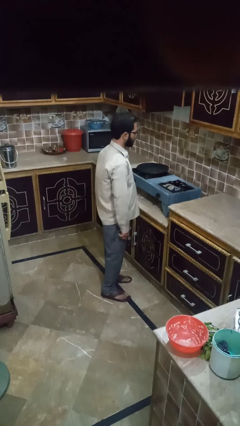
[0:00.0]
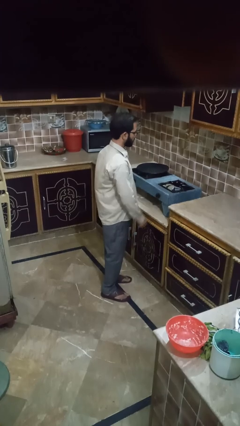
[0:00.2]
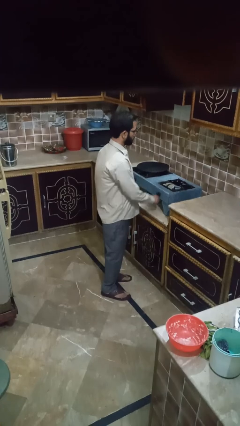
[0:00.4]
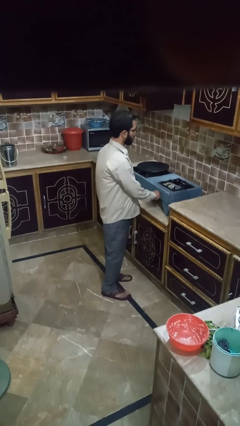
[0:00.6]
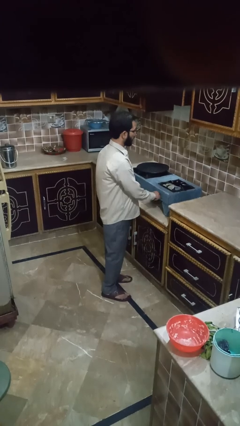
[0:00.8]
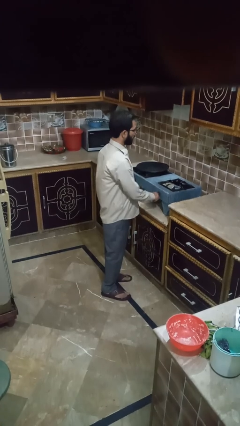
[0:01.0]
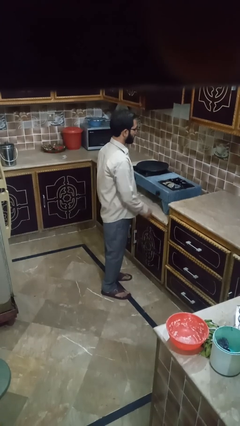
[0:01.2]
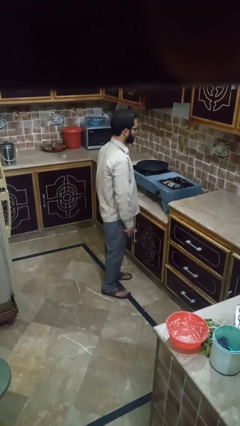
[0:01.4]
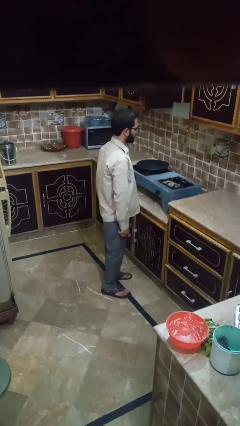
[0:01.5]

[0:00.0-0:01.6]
person turns off stovetop

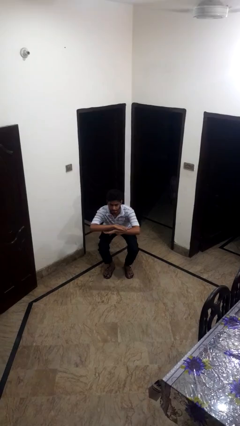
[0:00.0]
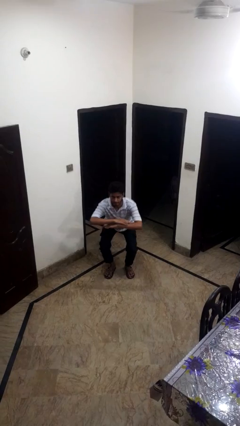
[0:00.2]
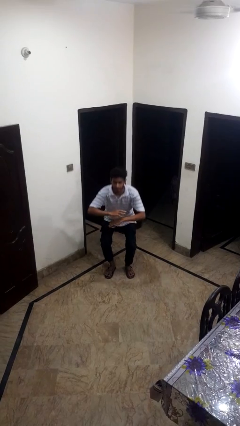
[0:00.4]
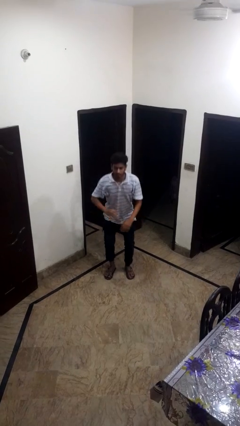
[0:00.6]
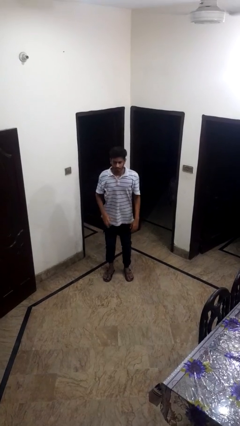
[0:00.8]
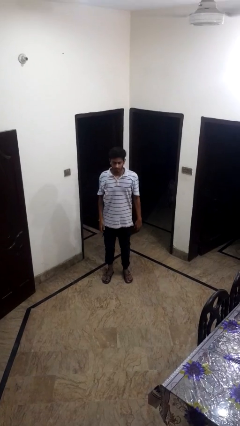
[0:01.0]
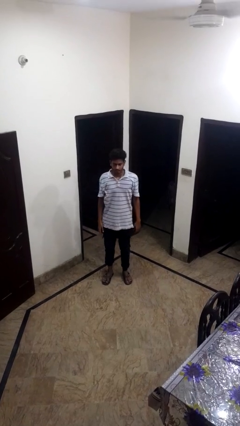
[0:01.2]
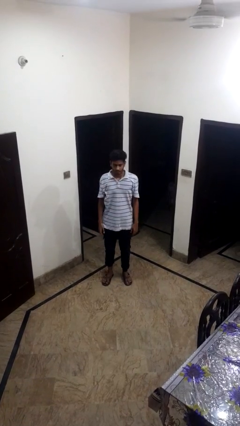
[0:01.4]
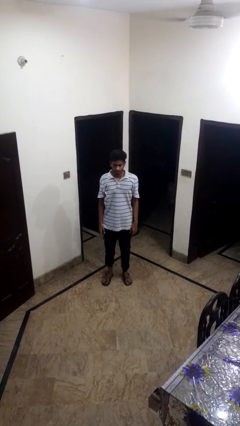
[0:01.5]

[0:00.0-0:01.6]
person stands up

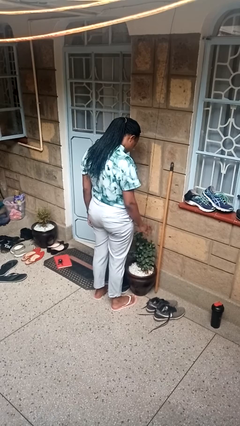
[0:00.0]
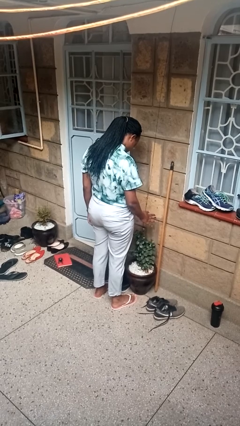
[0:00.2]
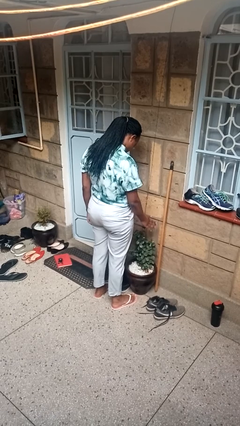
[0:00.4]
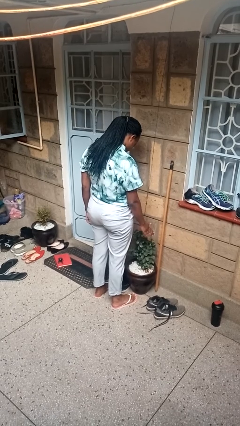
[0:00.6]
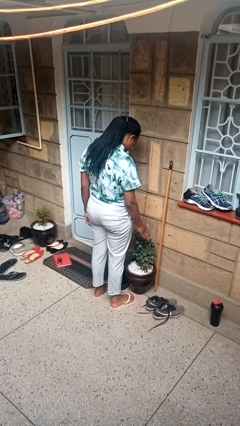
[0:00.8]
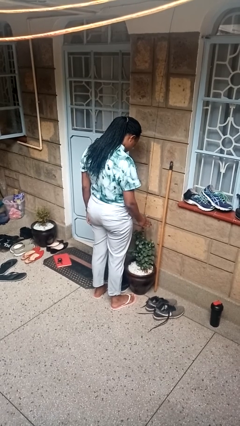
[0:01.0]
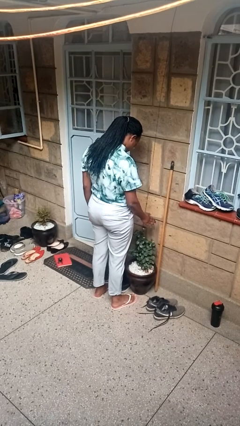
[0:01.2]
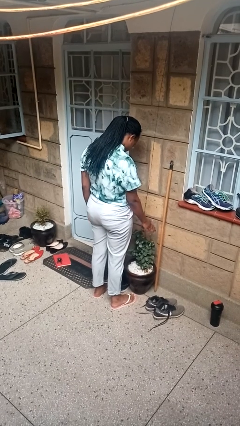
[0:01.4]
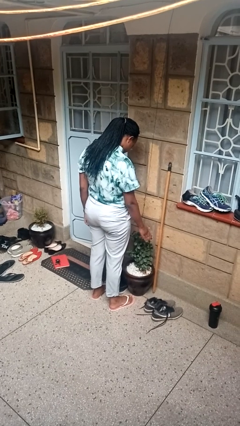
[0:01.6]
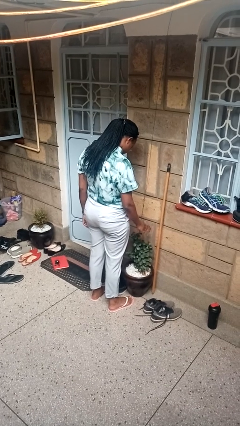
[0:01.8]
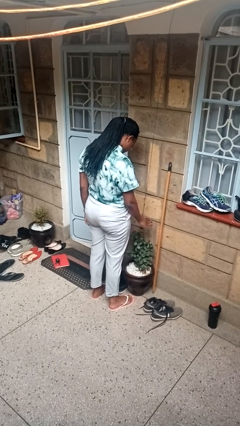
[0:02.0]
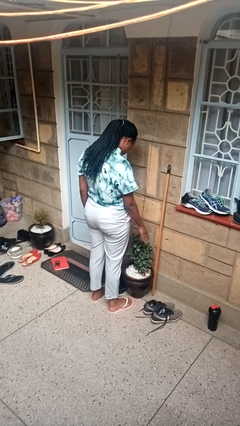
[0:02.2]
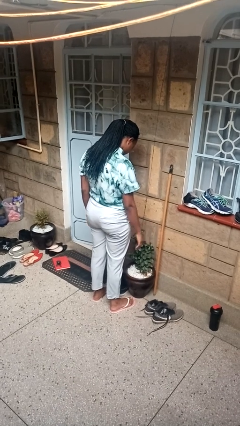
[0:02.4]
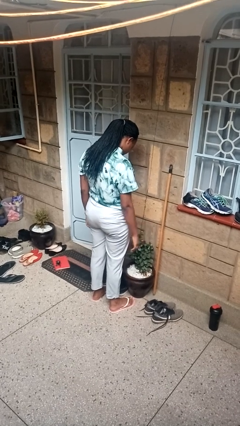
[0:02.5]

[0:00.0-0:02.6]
person waves hand over object

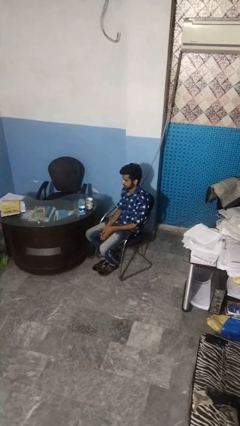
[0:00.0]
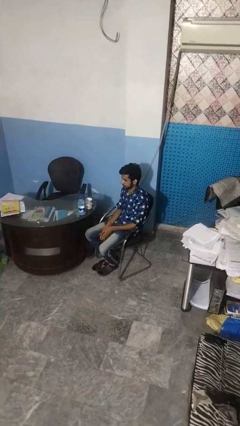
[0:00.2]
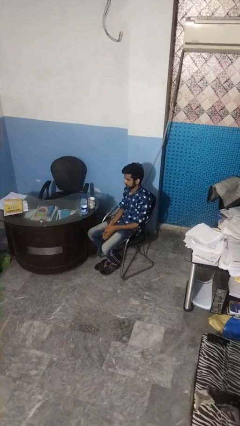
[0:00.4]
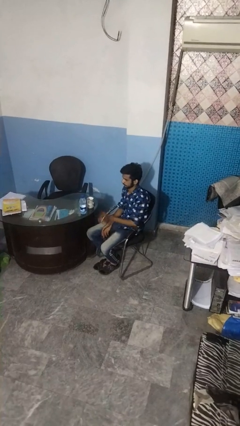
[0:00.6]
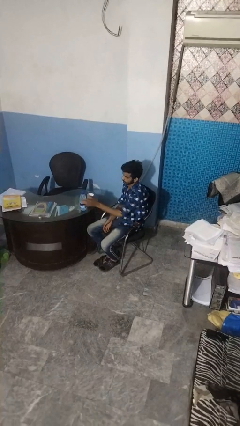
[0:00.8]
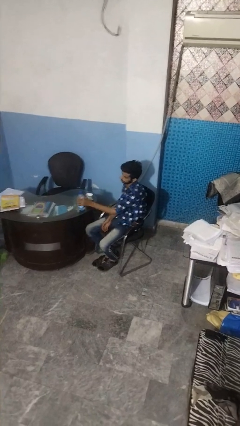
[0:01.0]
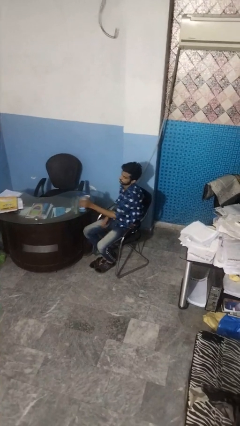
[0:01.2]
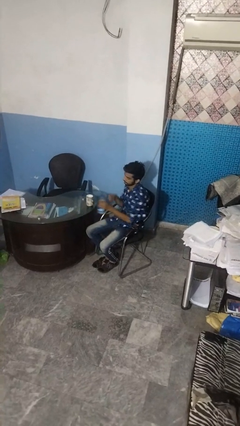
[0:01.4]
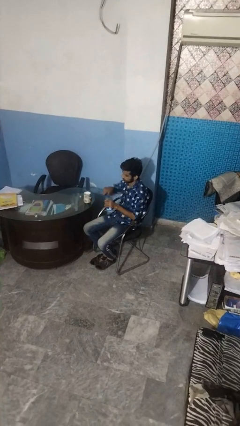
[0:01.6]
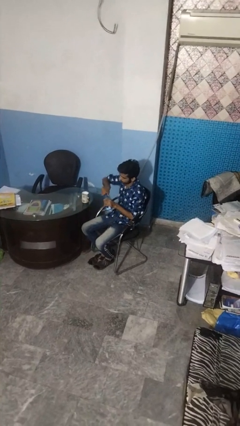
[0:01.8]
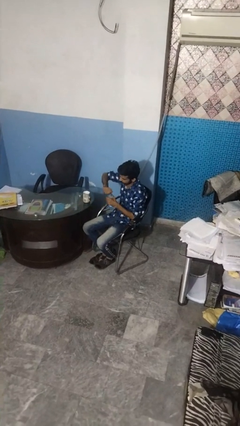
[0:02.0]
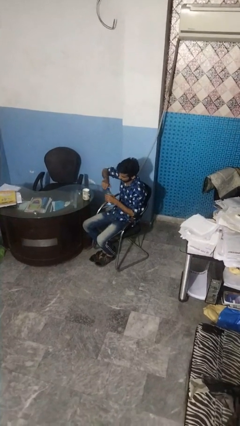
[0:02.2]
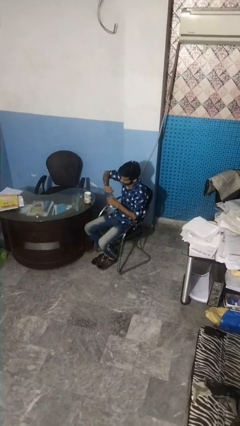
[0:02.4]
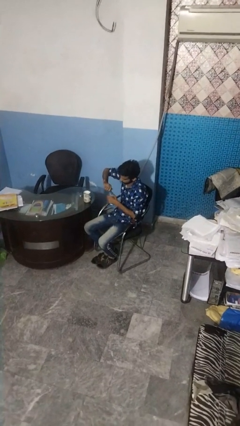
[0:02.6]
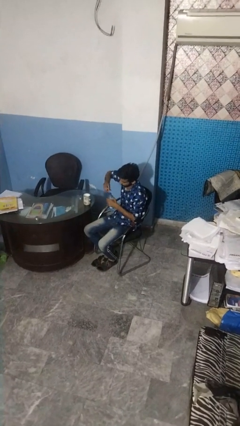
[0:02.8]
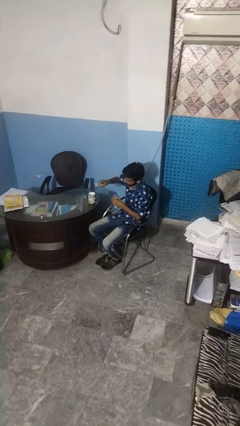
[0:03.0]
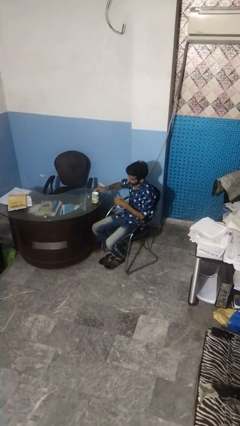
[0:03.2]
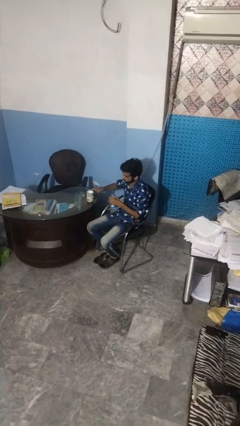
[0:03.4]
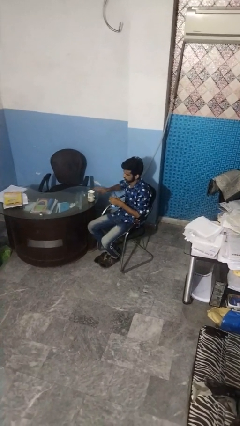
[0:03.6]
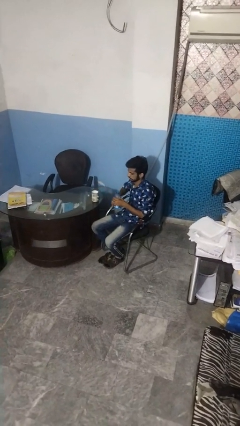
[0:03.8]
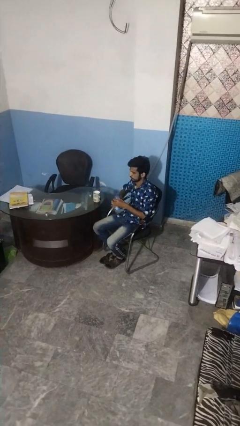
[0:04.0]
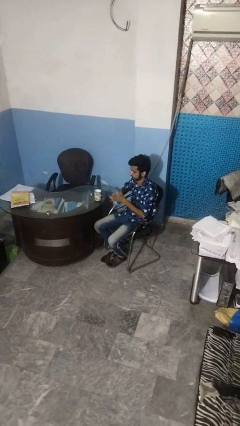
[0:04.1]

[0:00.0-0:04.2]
person unscrews lid from bottle

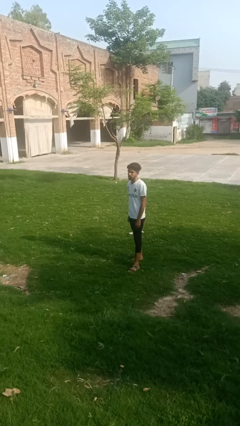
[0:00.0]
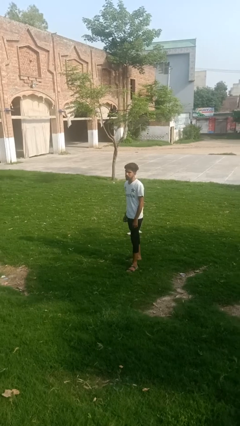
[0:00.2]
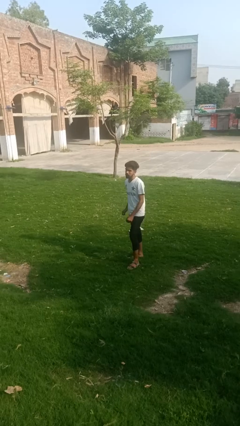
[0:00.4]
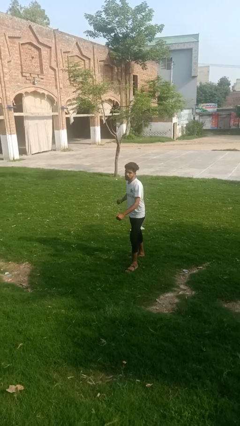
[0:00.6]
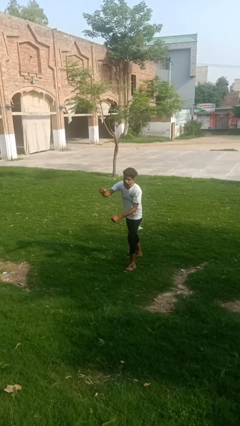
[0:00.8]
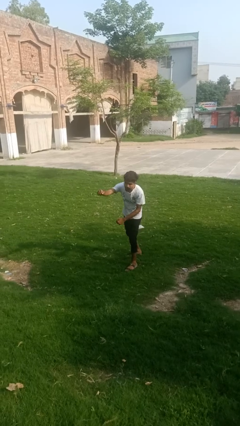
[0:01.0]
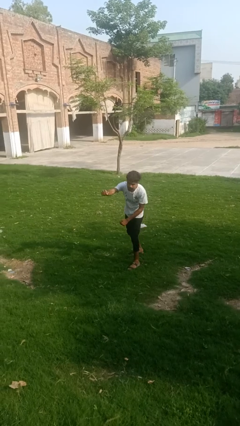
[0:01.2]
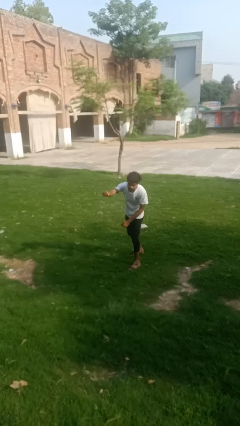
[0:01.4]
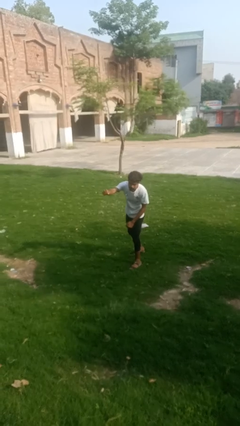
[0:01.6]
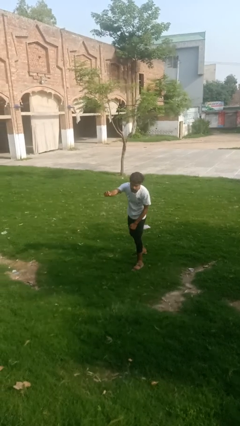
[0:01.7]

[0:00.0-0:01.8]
person punches

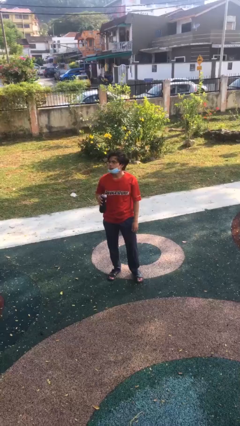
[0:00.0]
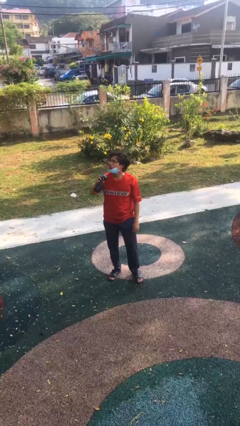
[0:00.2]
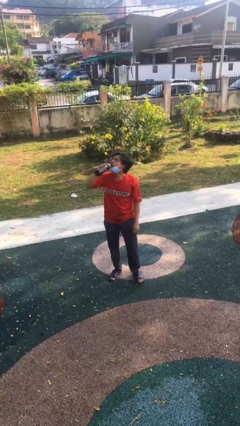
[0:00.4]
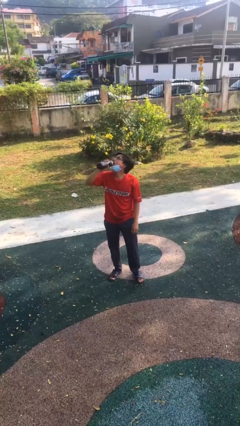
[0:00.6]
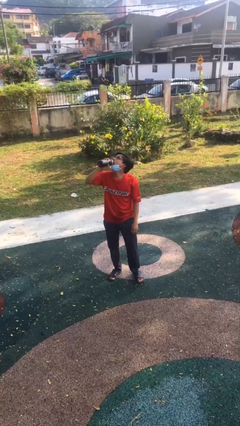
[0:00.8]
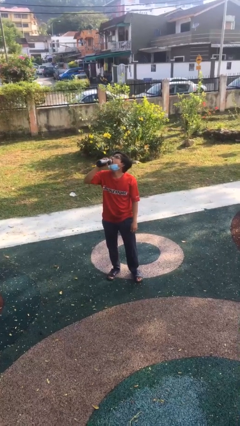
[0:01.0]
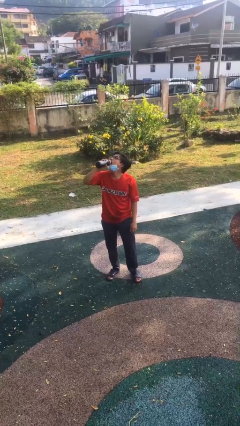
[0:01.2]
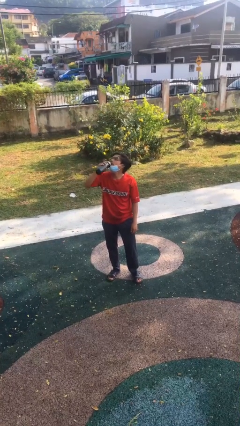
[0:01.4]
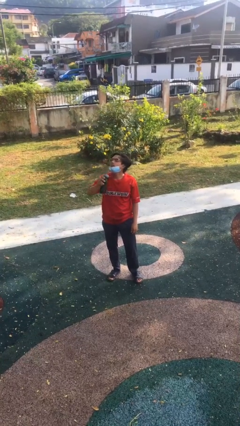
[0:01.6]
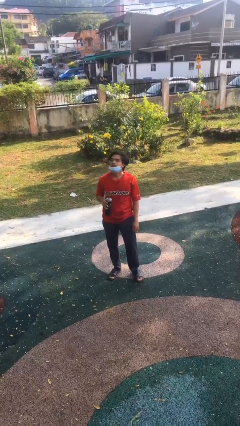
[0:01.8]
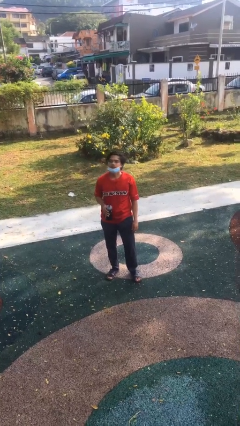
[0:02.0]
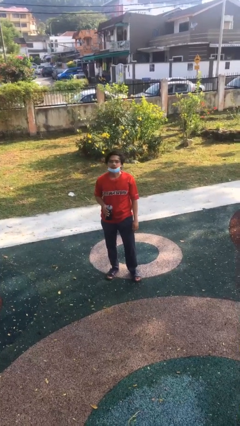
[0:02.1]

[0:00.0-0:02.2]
person drinks from bottle

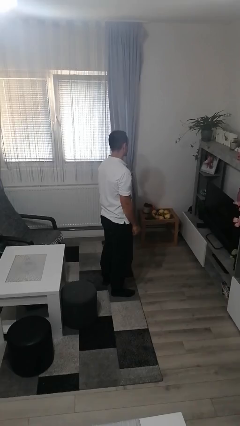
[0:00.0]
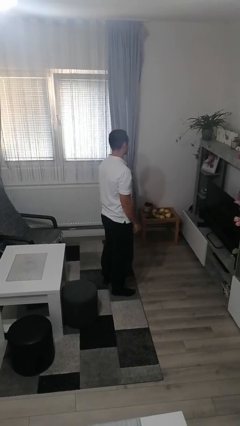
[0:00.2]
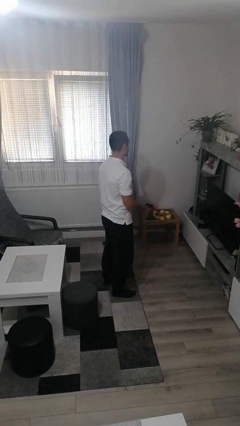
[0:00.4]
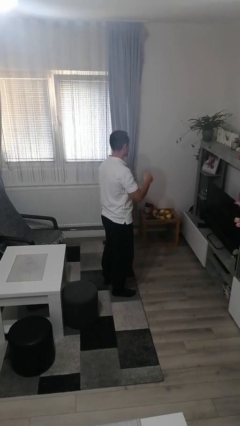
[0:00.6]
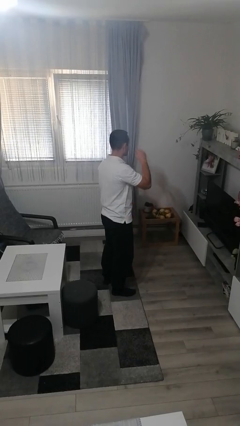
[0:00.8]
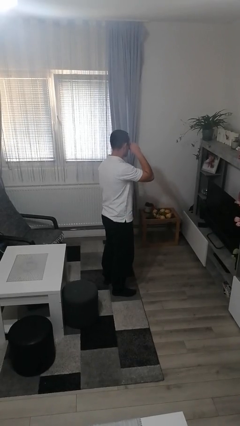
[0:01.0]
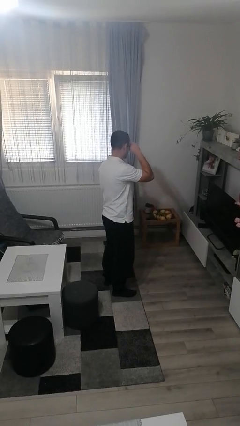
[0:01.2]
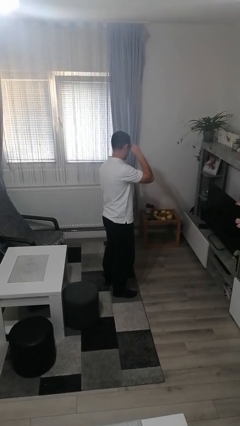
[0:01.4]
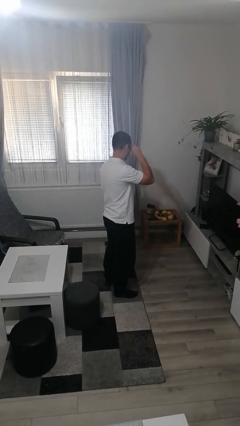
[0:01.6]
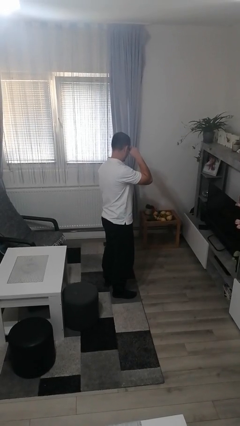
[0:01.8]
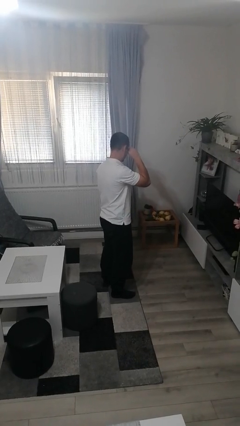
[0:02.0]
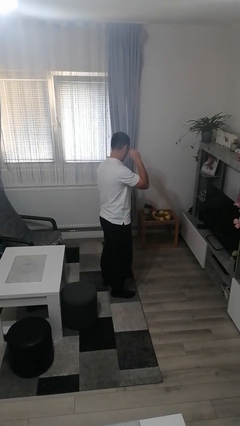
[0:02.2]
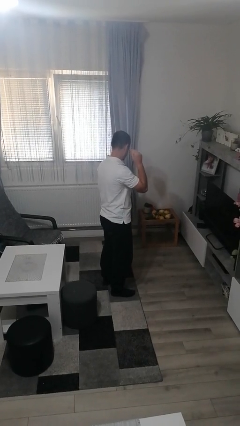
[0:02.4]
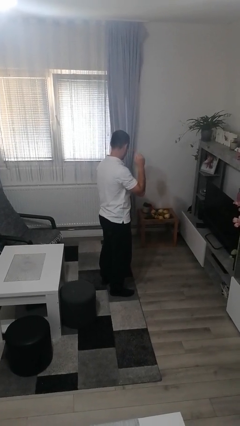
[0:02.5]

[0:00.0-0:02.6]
person rubs eyes

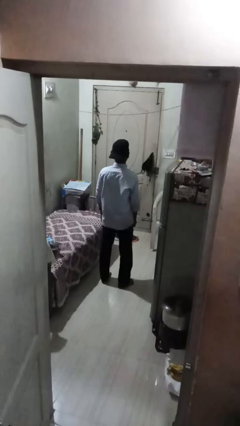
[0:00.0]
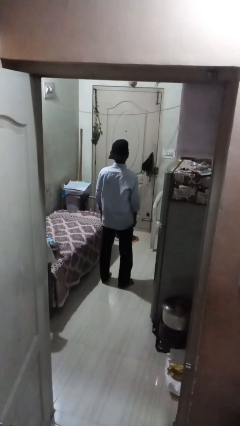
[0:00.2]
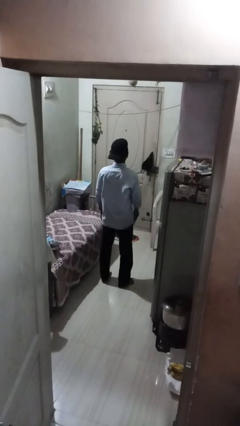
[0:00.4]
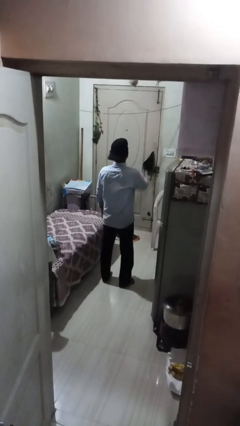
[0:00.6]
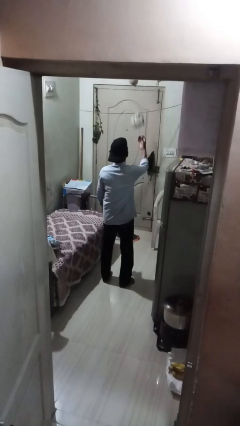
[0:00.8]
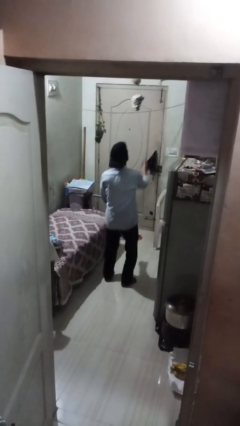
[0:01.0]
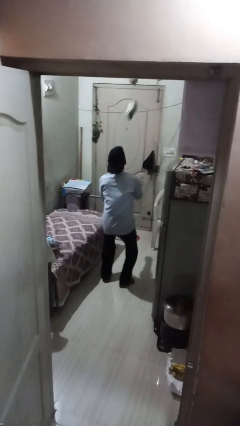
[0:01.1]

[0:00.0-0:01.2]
person drops object
